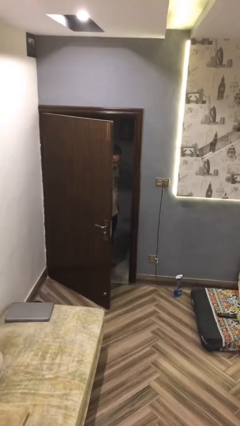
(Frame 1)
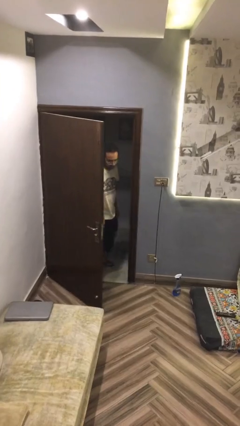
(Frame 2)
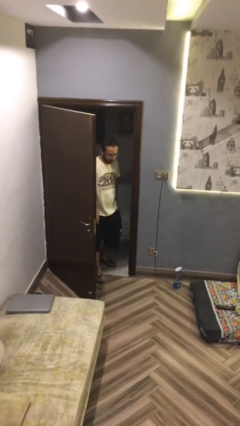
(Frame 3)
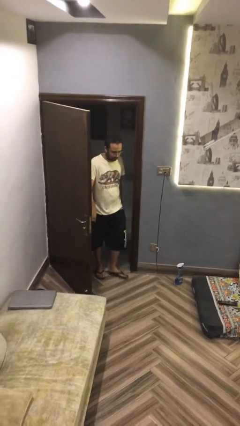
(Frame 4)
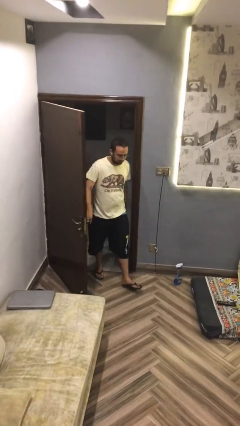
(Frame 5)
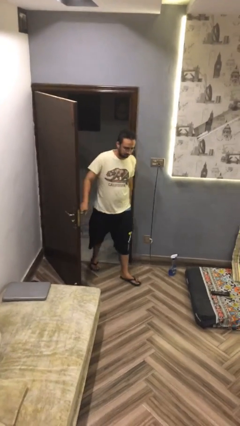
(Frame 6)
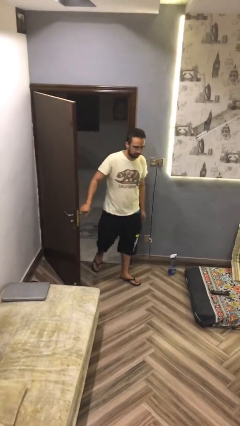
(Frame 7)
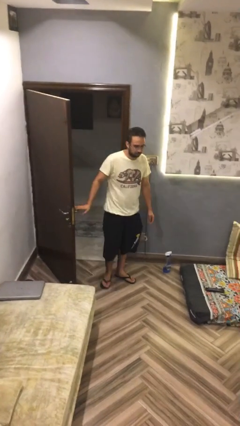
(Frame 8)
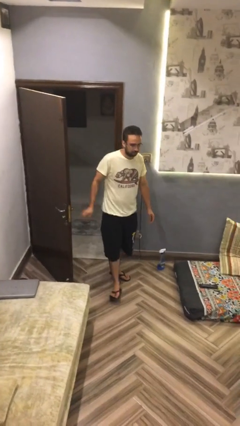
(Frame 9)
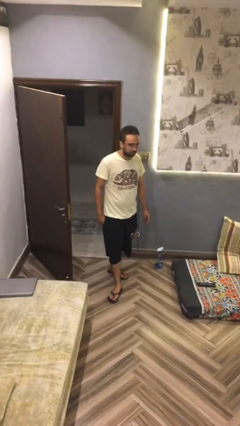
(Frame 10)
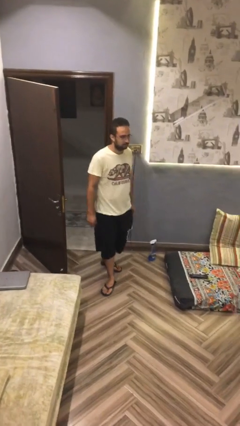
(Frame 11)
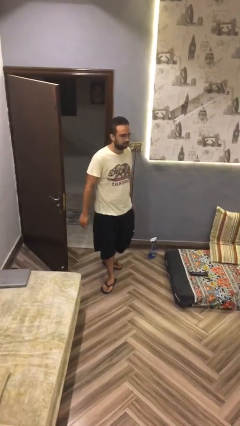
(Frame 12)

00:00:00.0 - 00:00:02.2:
person enters scene through structure

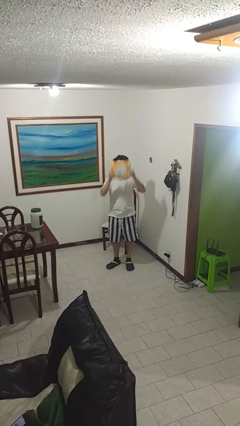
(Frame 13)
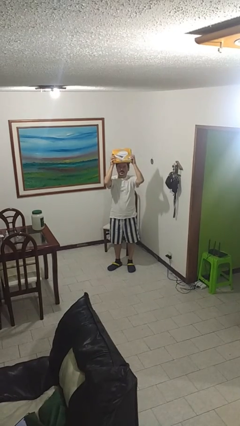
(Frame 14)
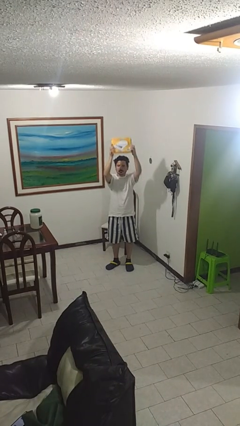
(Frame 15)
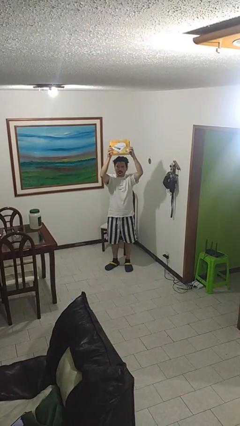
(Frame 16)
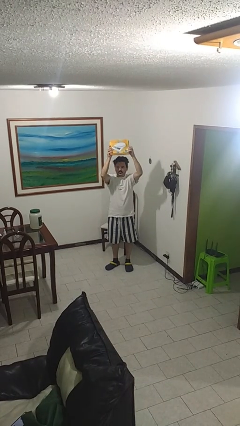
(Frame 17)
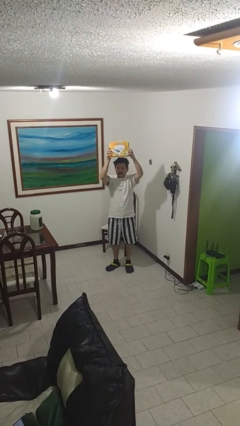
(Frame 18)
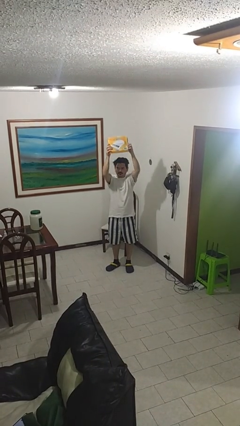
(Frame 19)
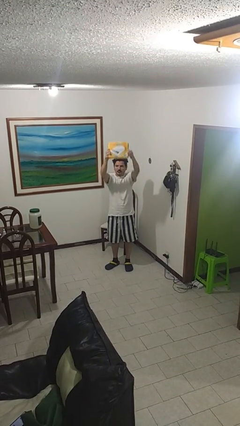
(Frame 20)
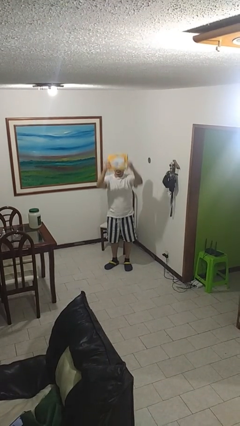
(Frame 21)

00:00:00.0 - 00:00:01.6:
person holds object above head

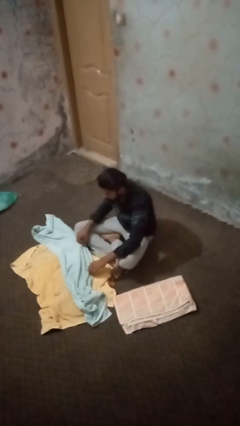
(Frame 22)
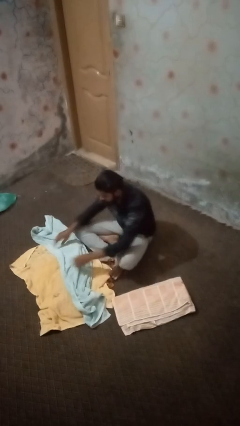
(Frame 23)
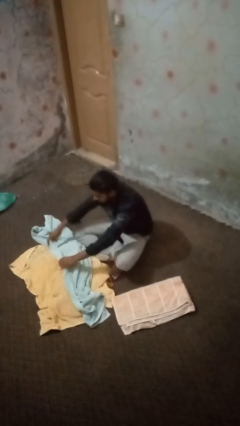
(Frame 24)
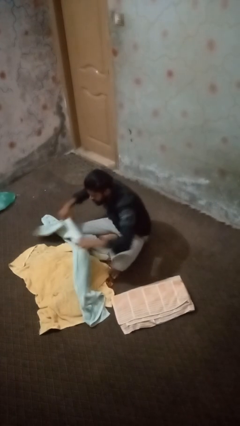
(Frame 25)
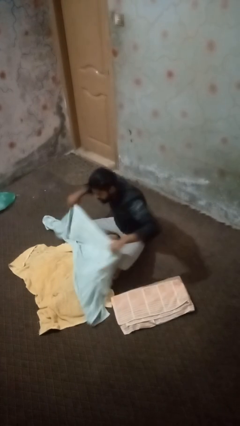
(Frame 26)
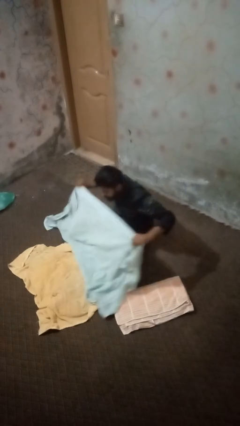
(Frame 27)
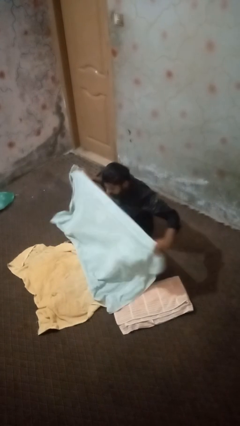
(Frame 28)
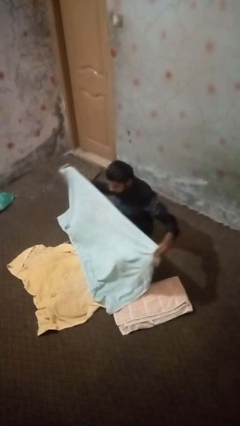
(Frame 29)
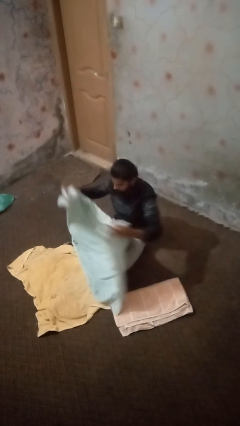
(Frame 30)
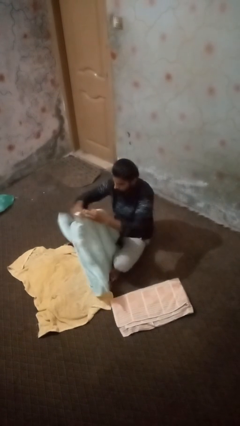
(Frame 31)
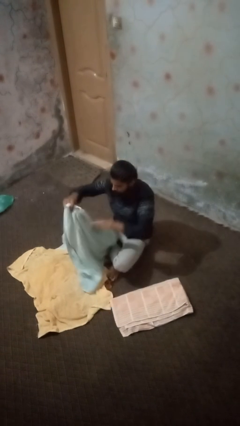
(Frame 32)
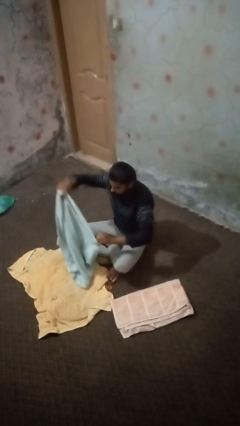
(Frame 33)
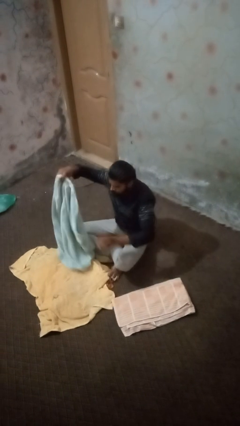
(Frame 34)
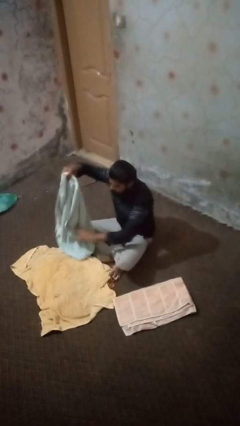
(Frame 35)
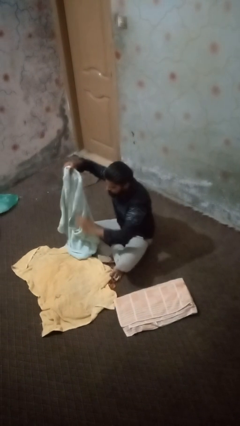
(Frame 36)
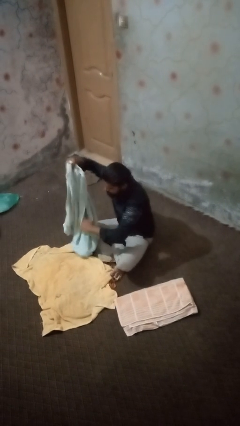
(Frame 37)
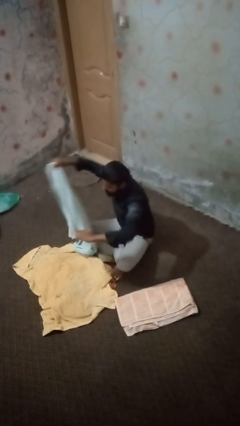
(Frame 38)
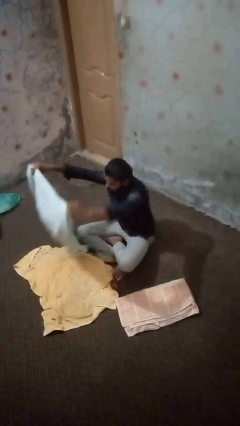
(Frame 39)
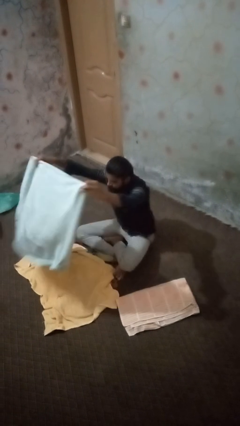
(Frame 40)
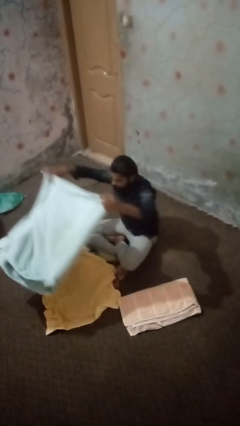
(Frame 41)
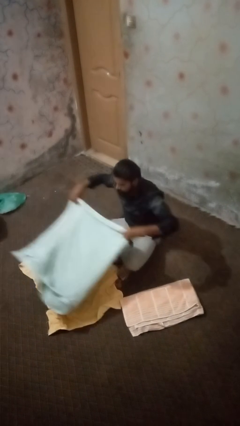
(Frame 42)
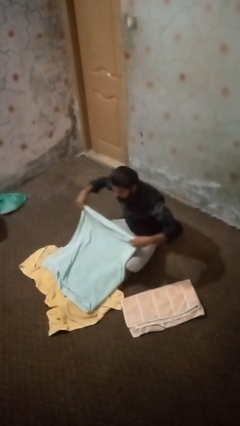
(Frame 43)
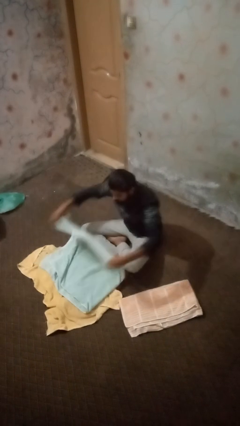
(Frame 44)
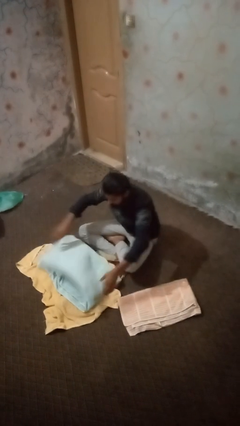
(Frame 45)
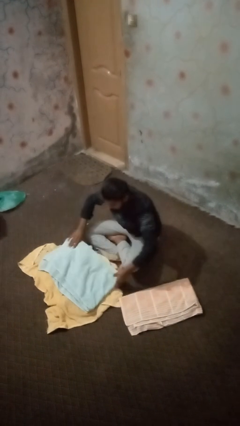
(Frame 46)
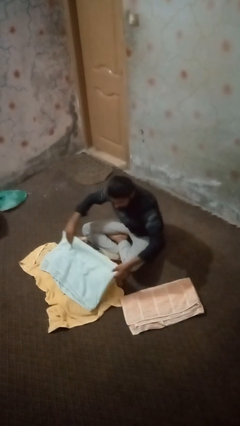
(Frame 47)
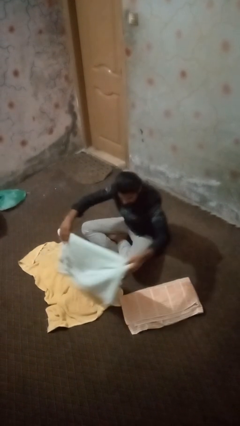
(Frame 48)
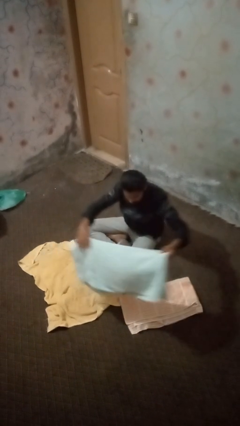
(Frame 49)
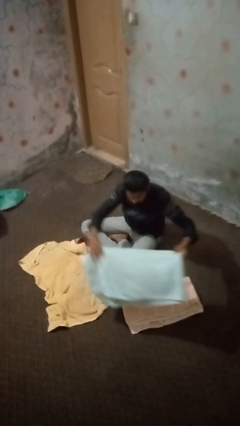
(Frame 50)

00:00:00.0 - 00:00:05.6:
person folds towel

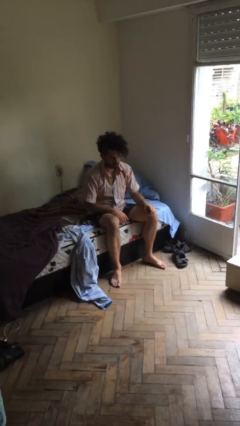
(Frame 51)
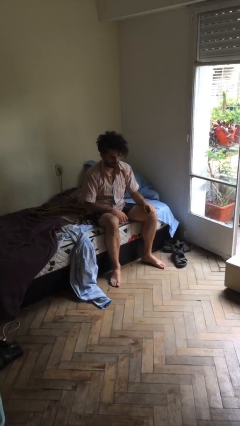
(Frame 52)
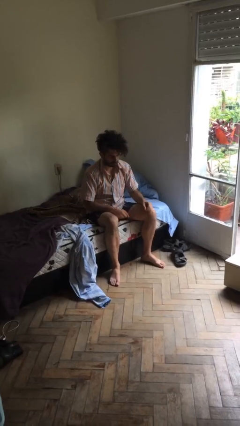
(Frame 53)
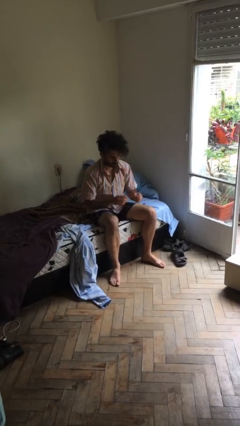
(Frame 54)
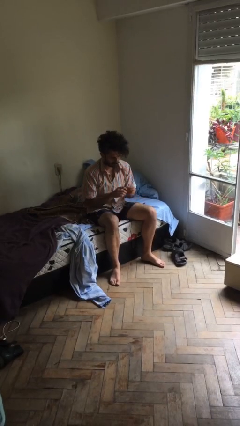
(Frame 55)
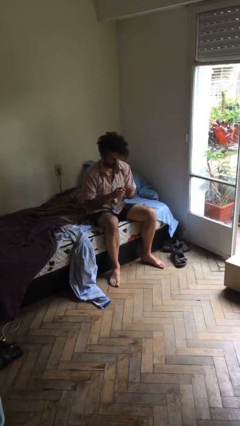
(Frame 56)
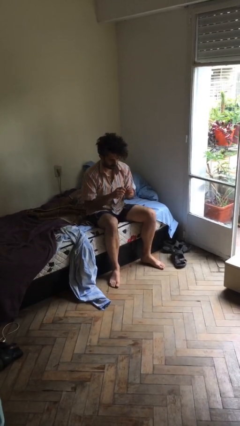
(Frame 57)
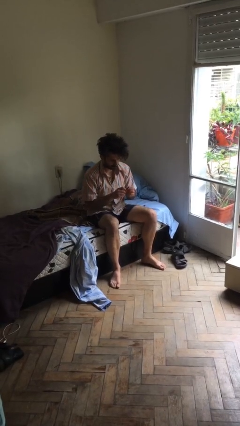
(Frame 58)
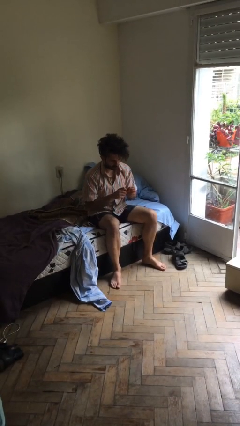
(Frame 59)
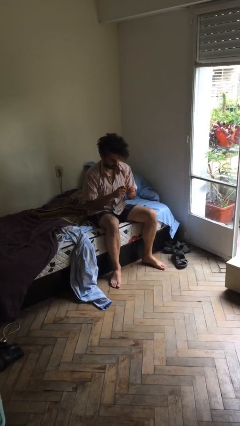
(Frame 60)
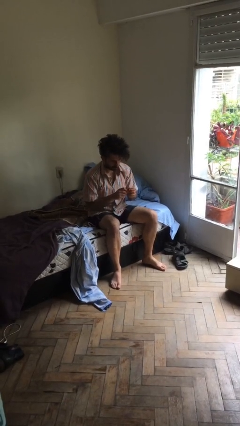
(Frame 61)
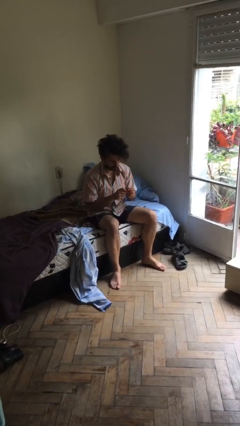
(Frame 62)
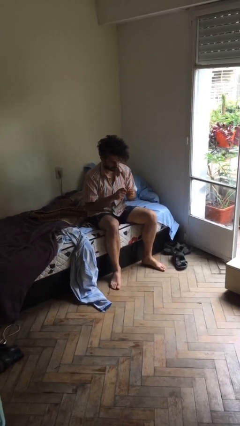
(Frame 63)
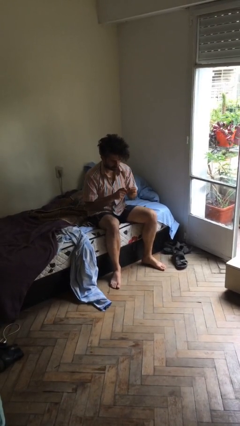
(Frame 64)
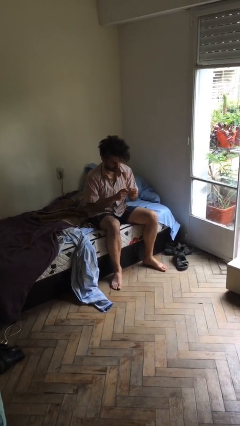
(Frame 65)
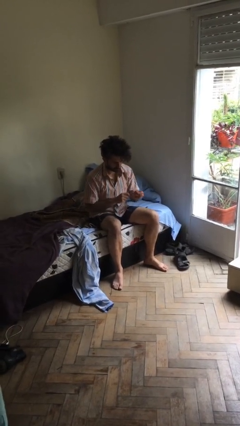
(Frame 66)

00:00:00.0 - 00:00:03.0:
person files fingernails

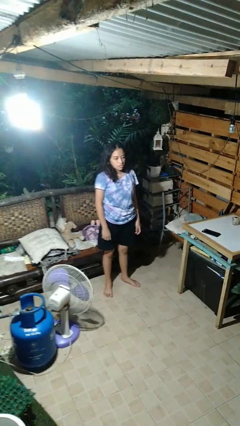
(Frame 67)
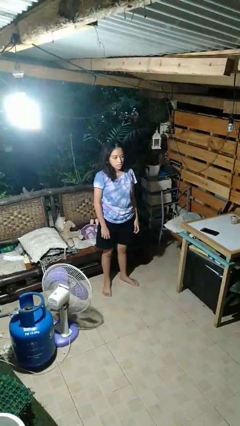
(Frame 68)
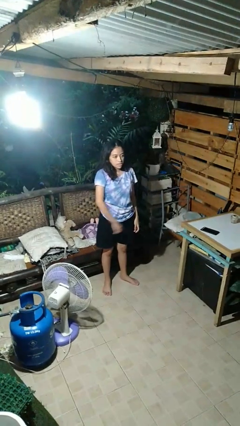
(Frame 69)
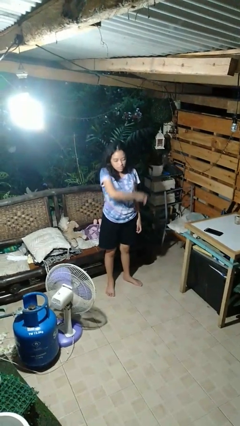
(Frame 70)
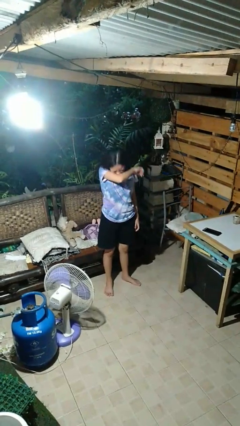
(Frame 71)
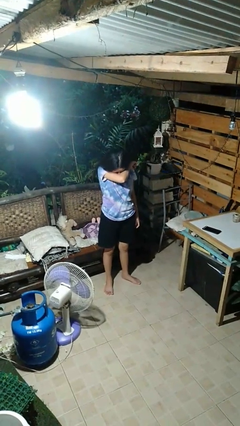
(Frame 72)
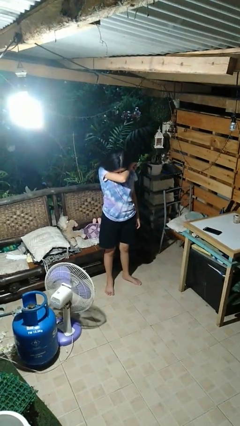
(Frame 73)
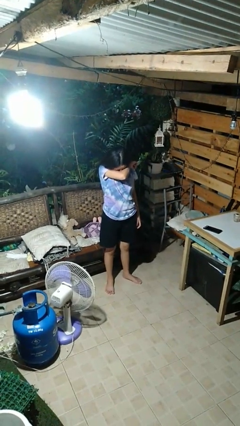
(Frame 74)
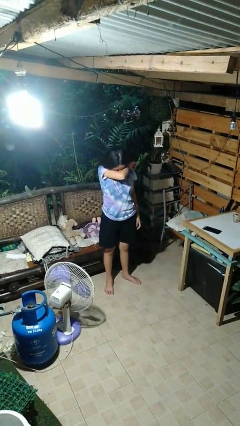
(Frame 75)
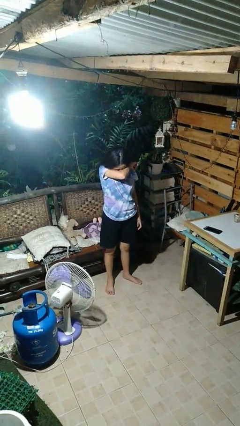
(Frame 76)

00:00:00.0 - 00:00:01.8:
person sneezes into arm

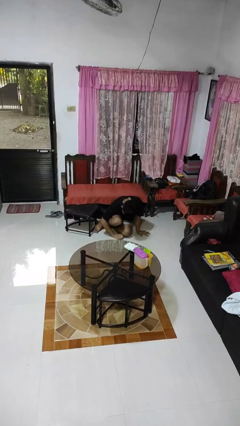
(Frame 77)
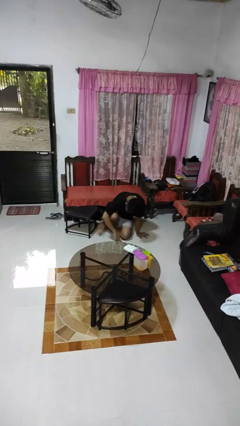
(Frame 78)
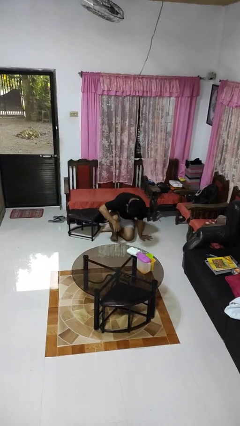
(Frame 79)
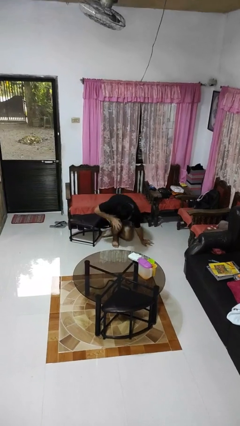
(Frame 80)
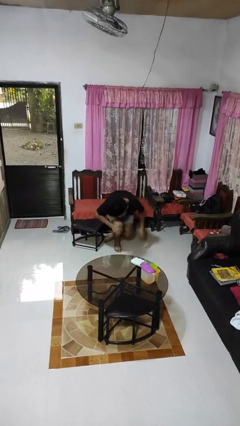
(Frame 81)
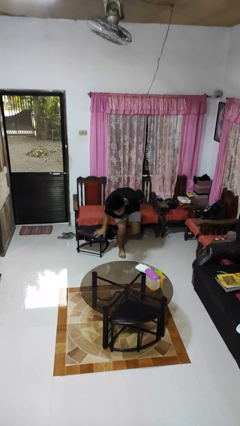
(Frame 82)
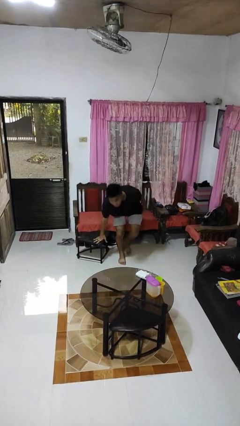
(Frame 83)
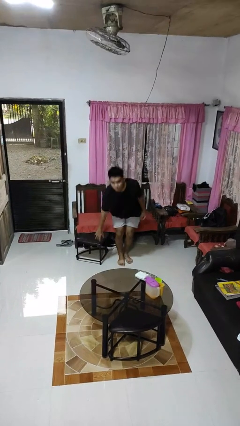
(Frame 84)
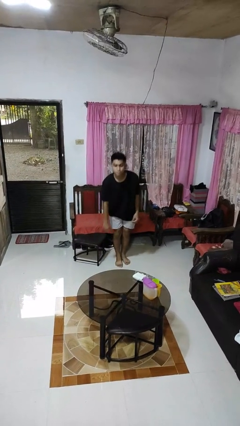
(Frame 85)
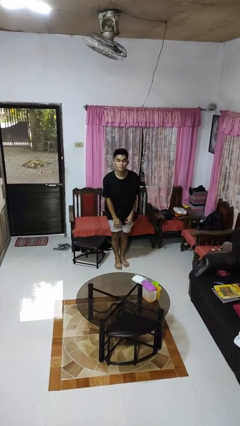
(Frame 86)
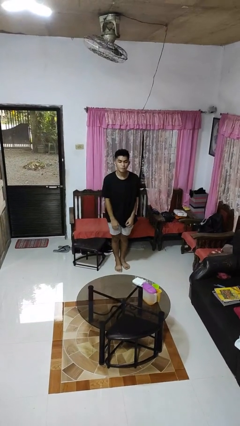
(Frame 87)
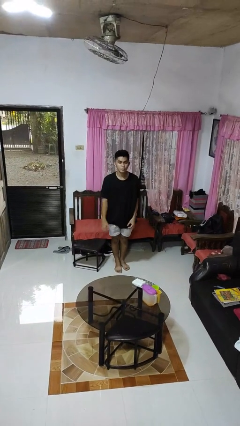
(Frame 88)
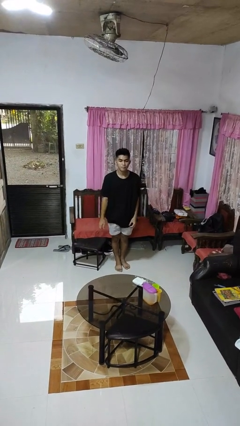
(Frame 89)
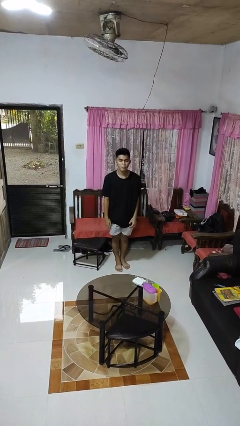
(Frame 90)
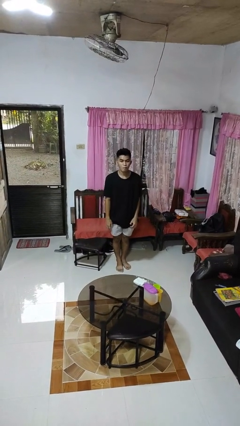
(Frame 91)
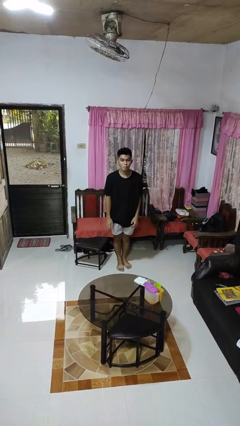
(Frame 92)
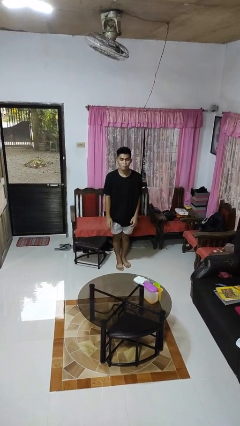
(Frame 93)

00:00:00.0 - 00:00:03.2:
person stands up from floor

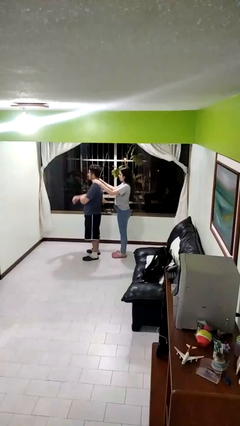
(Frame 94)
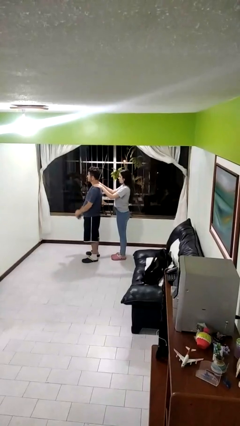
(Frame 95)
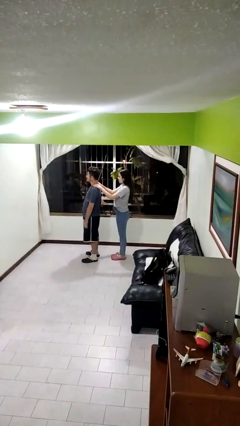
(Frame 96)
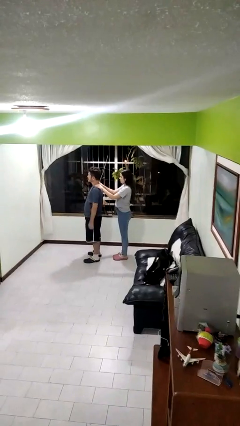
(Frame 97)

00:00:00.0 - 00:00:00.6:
person grabs person by shoulder
